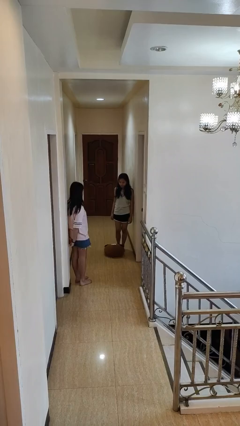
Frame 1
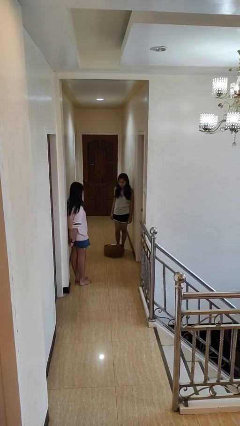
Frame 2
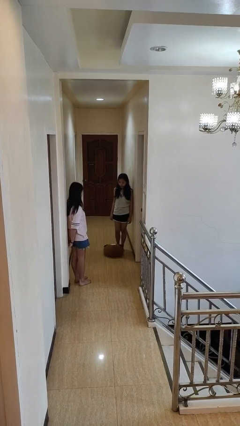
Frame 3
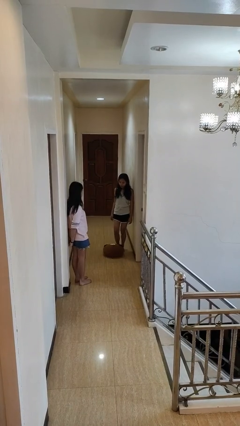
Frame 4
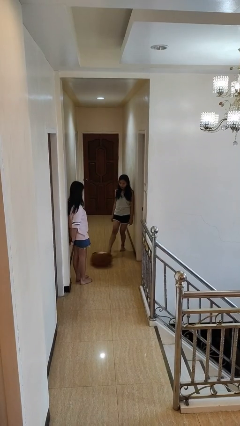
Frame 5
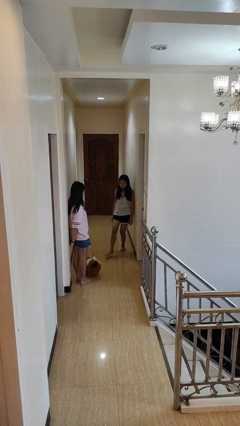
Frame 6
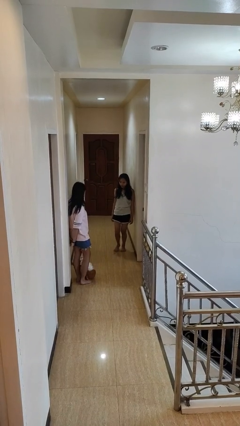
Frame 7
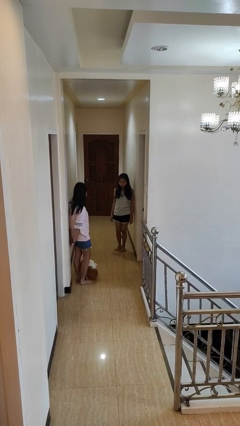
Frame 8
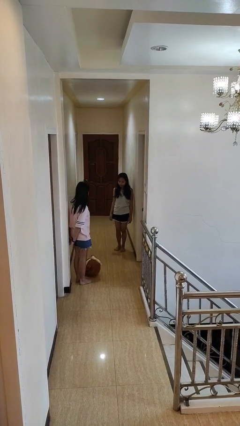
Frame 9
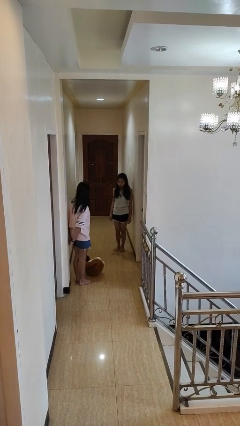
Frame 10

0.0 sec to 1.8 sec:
person kicks object to person

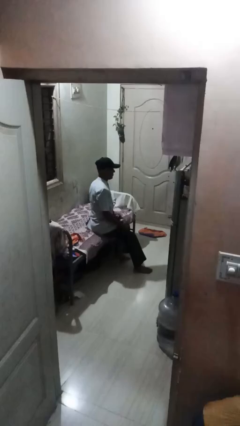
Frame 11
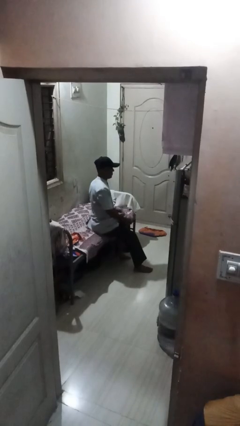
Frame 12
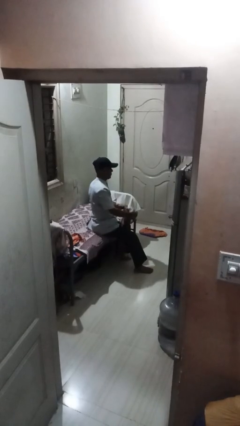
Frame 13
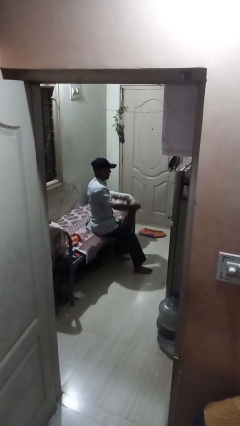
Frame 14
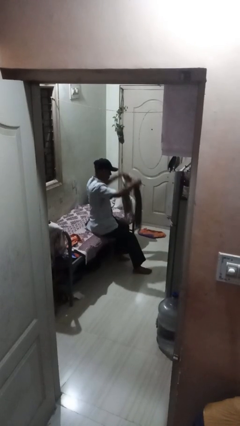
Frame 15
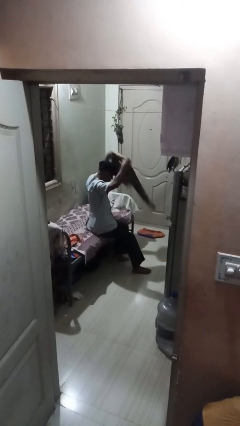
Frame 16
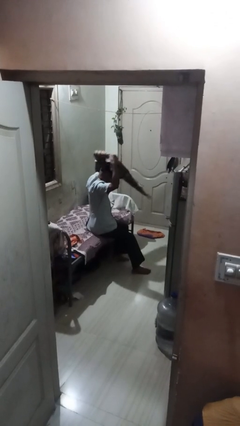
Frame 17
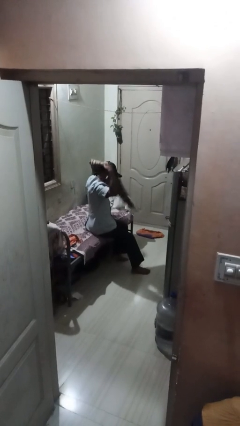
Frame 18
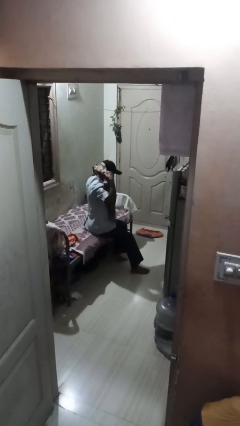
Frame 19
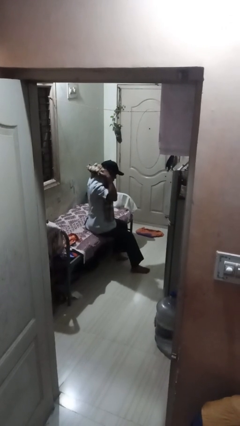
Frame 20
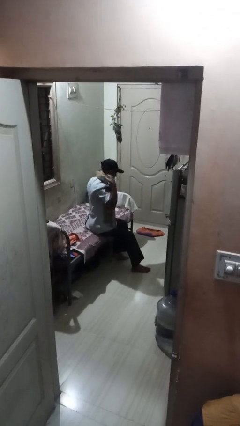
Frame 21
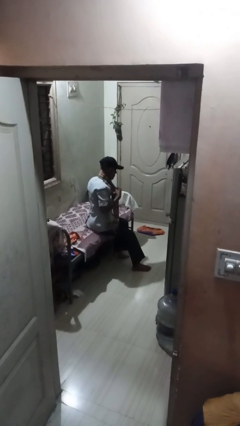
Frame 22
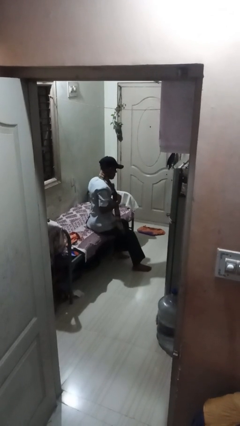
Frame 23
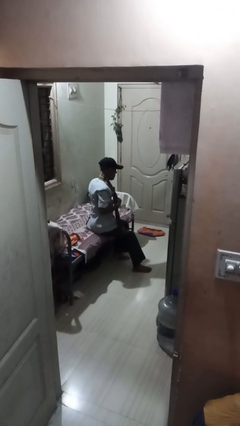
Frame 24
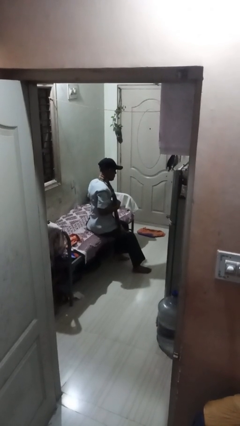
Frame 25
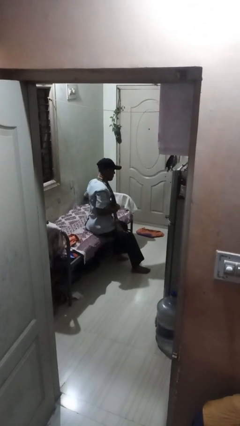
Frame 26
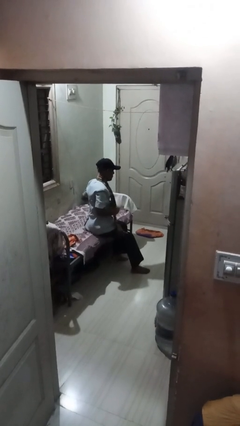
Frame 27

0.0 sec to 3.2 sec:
person puts on scarf

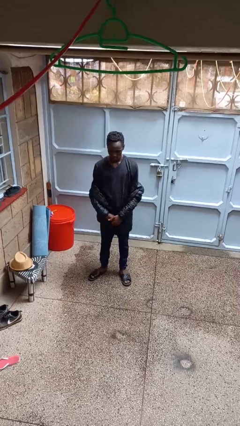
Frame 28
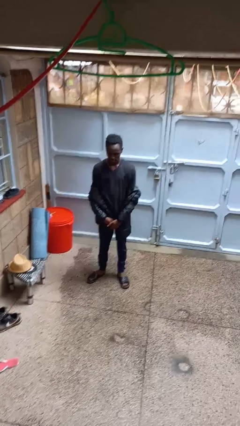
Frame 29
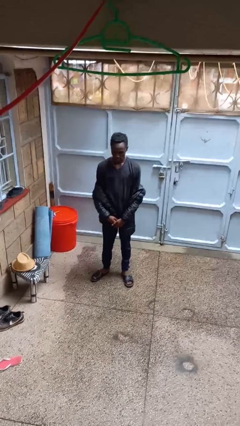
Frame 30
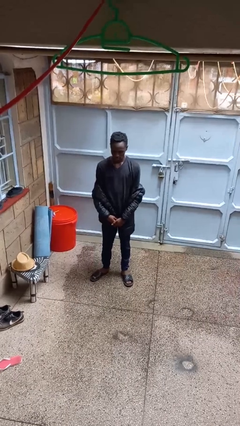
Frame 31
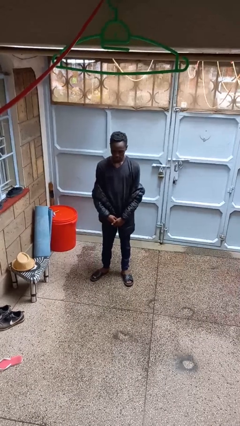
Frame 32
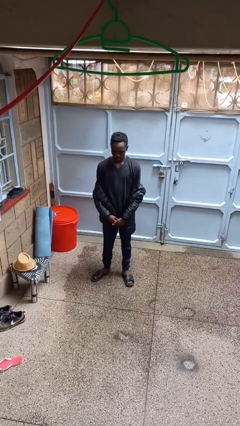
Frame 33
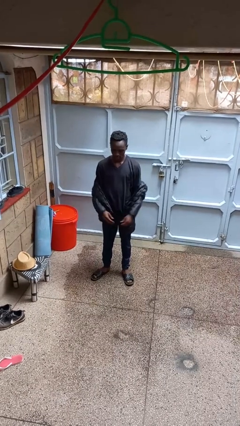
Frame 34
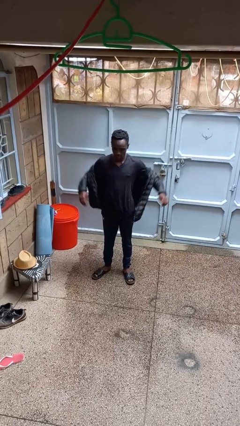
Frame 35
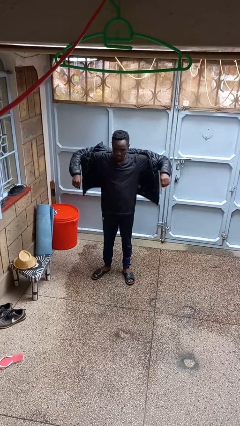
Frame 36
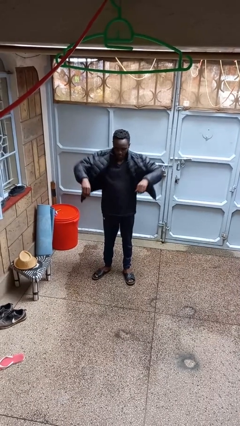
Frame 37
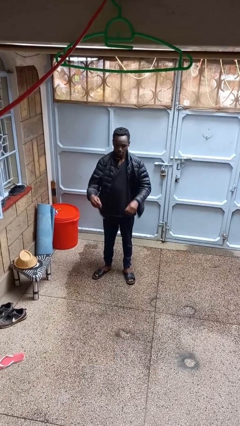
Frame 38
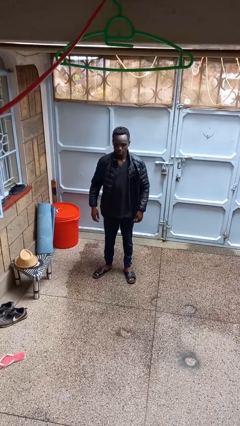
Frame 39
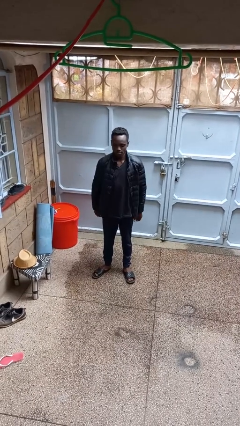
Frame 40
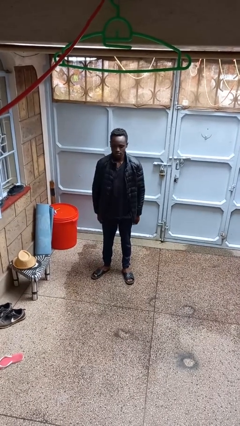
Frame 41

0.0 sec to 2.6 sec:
person puts on jacket

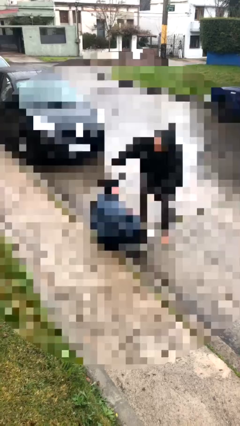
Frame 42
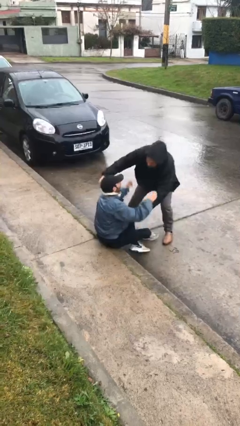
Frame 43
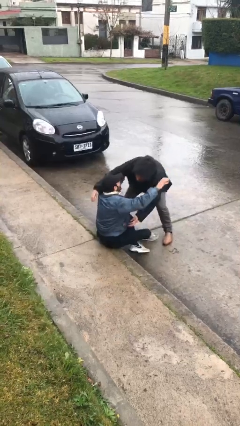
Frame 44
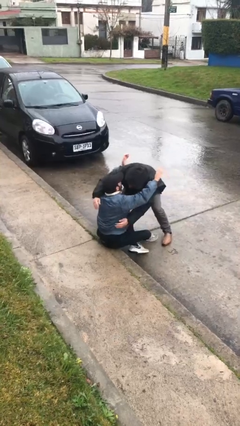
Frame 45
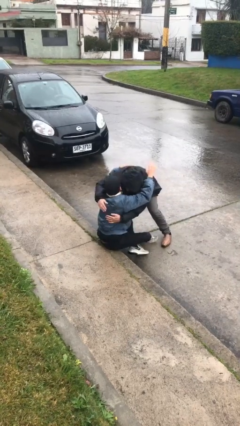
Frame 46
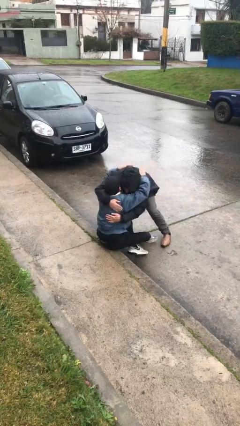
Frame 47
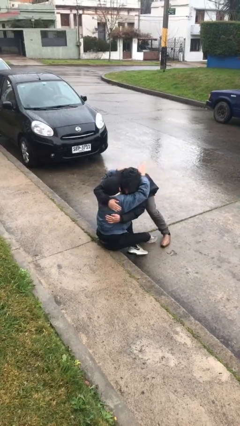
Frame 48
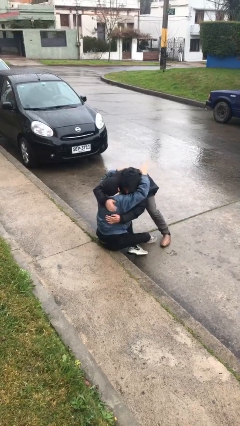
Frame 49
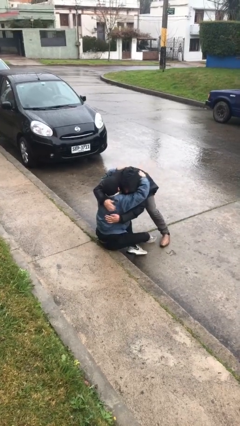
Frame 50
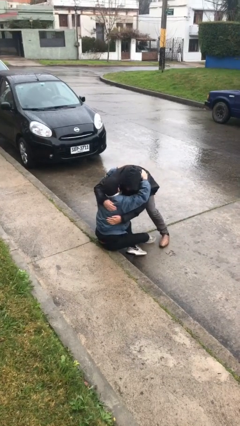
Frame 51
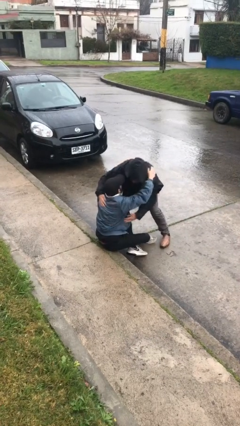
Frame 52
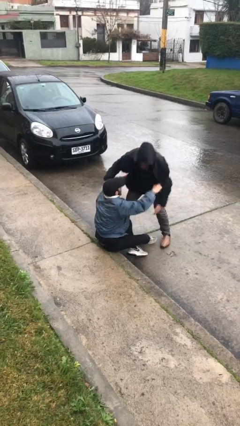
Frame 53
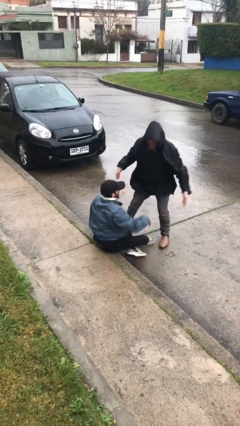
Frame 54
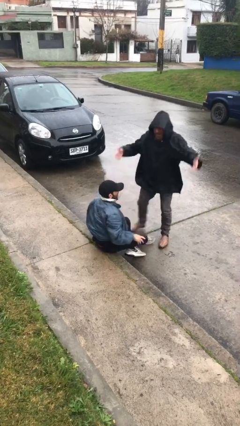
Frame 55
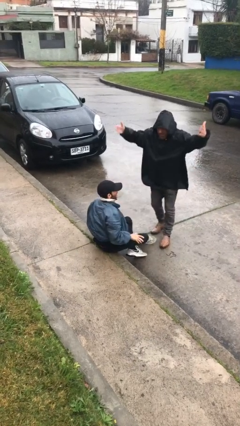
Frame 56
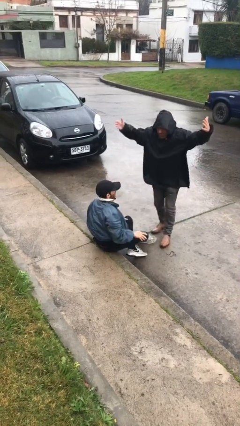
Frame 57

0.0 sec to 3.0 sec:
person embraces person

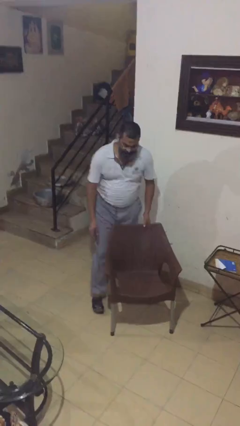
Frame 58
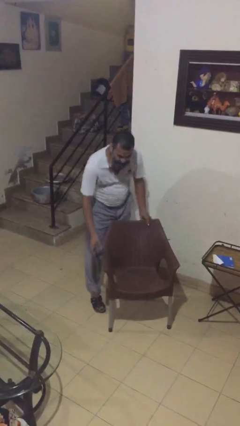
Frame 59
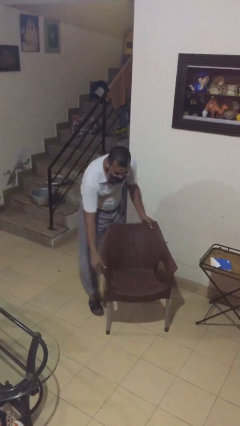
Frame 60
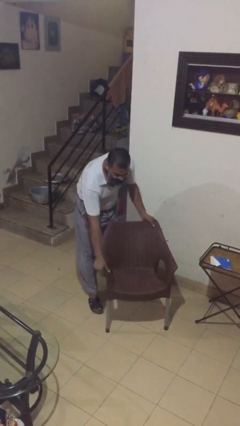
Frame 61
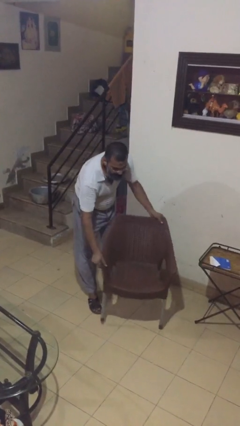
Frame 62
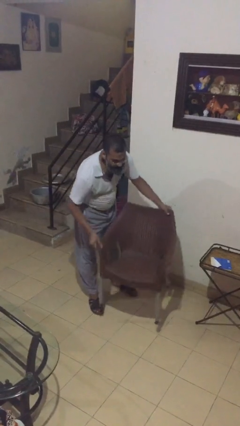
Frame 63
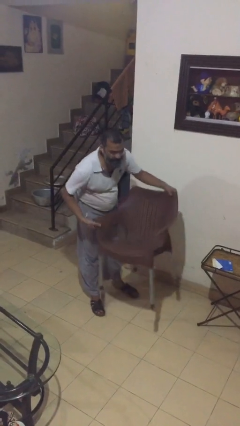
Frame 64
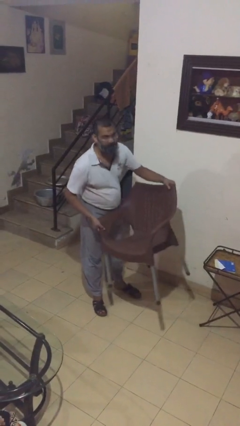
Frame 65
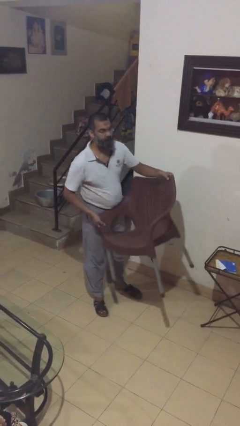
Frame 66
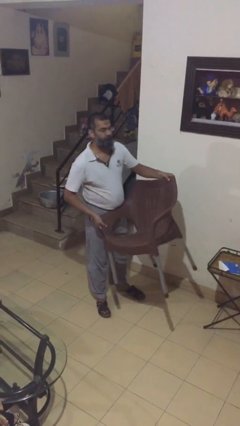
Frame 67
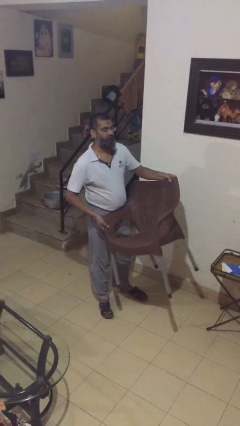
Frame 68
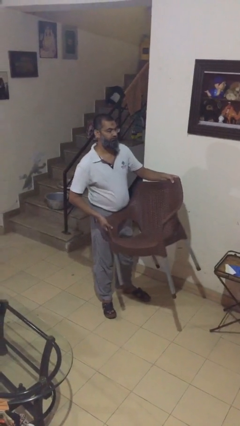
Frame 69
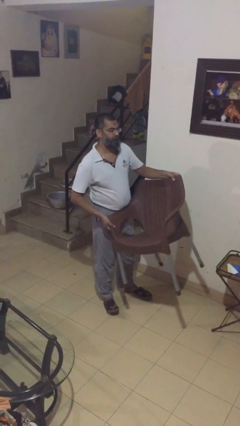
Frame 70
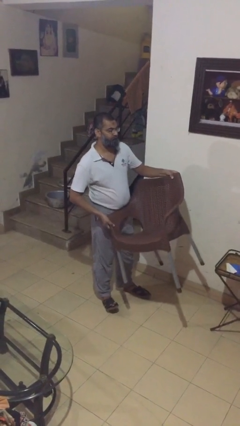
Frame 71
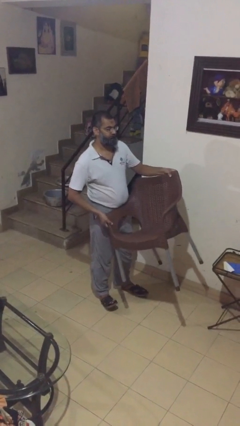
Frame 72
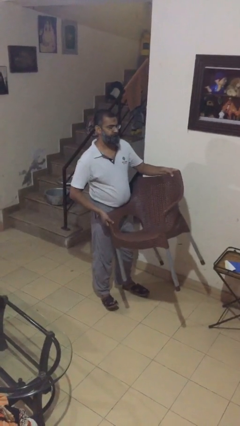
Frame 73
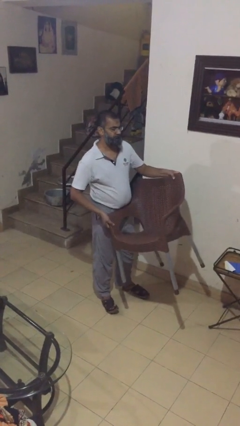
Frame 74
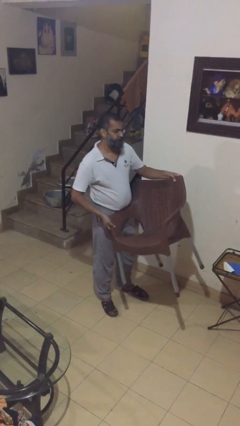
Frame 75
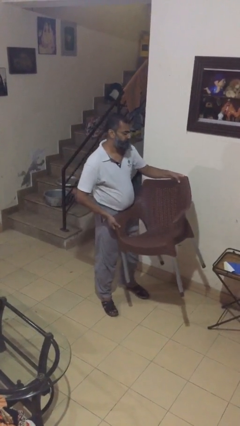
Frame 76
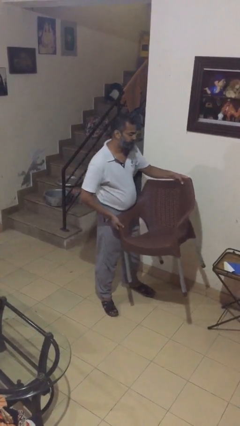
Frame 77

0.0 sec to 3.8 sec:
person carries heavy object

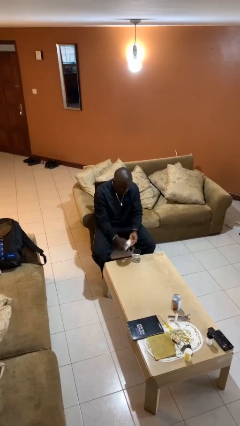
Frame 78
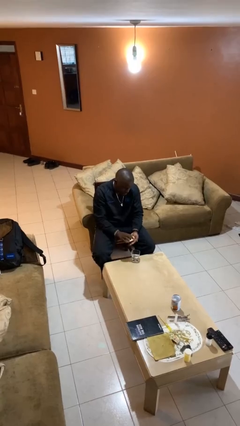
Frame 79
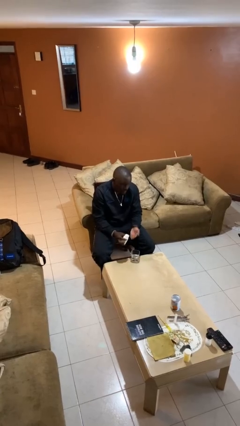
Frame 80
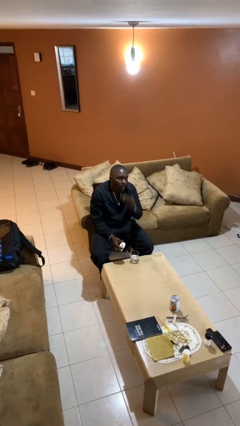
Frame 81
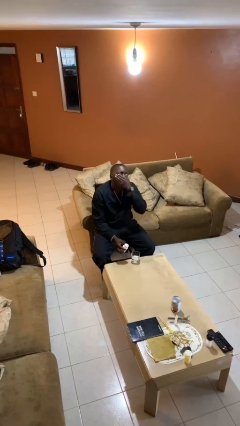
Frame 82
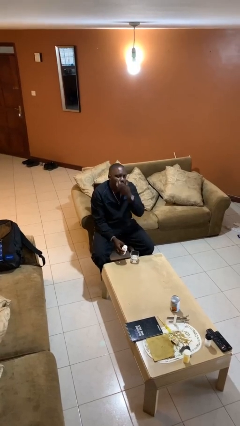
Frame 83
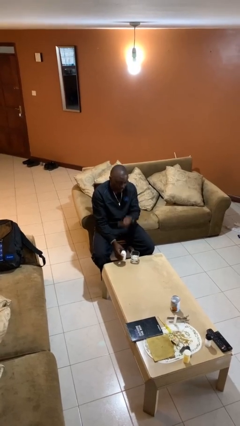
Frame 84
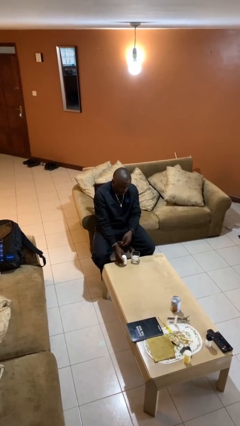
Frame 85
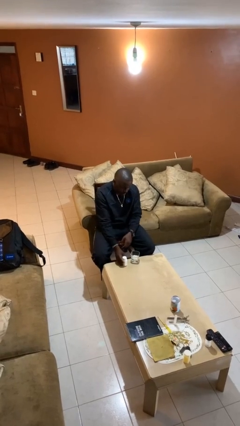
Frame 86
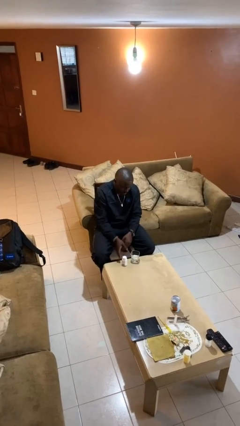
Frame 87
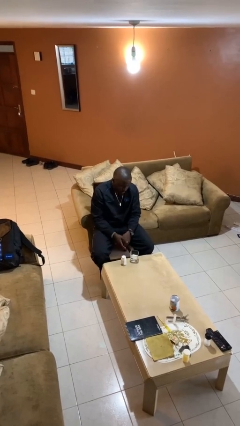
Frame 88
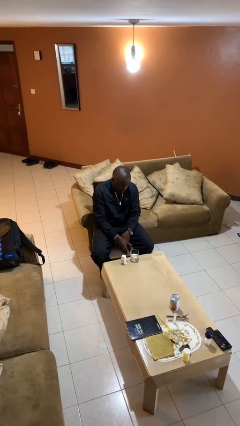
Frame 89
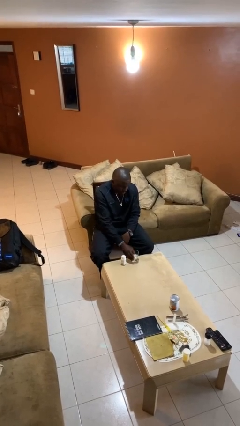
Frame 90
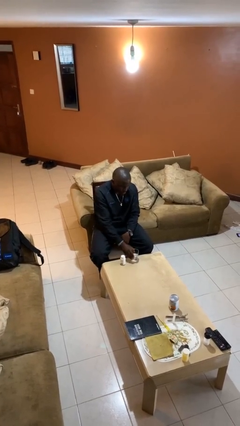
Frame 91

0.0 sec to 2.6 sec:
person takes medicine pills

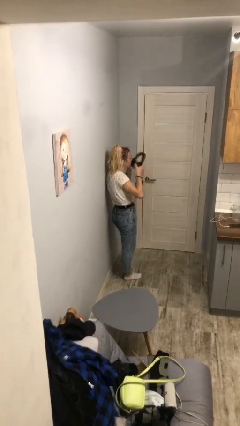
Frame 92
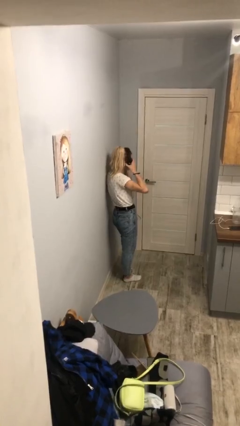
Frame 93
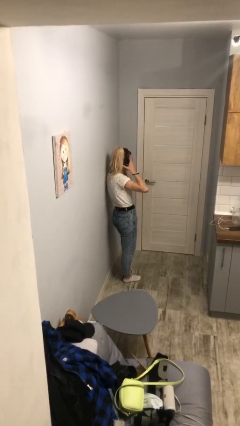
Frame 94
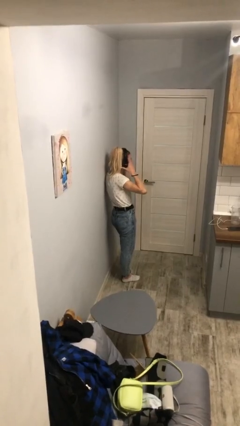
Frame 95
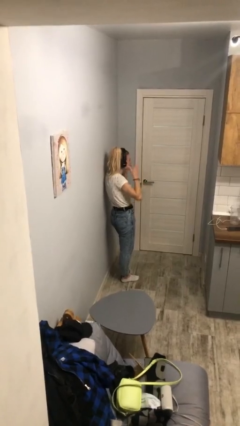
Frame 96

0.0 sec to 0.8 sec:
person puts on headphones
